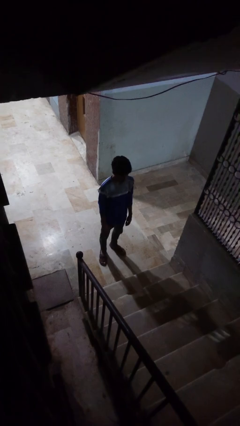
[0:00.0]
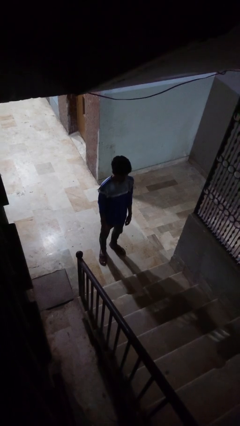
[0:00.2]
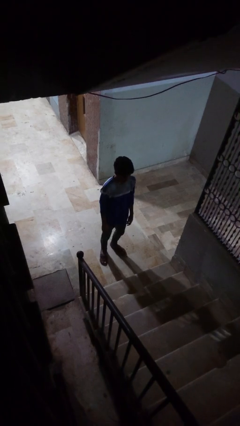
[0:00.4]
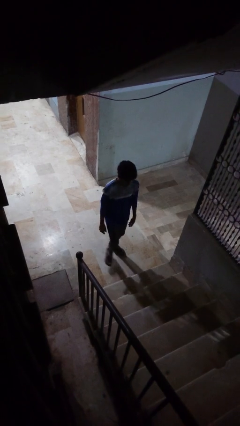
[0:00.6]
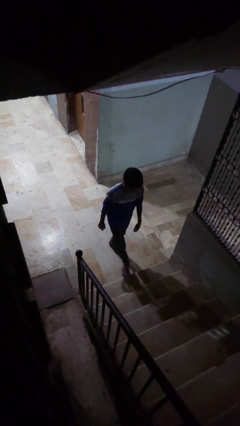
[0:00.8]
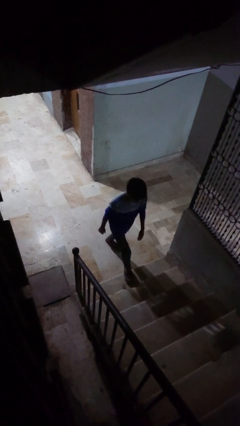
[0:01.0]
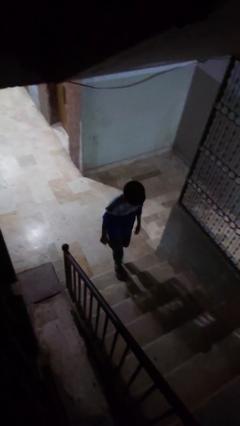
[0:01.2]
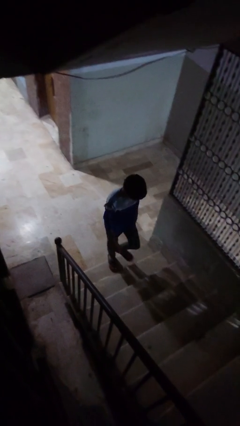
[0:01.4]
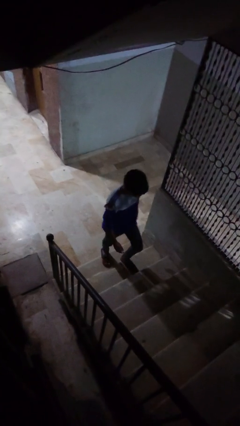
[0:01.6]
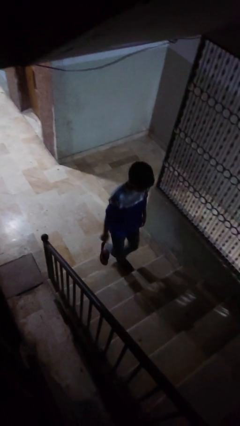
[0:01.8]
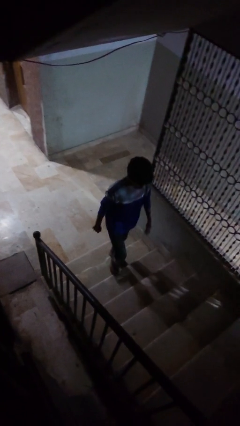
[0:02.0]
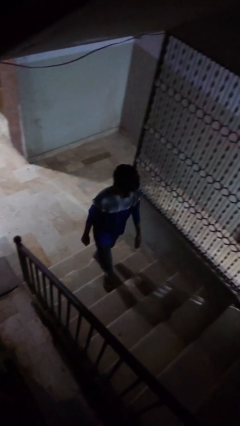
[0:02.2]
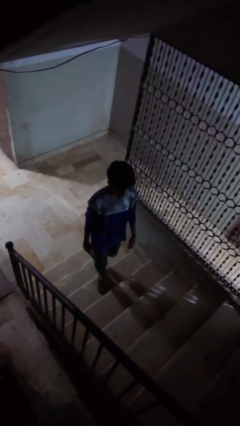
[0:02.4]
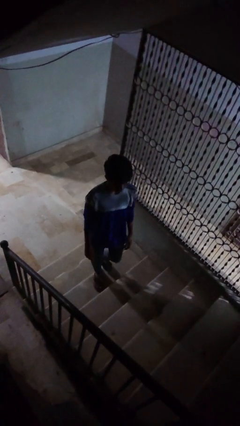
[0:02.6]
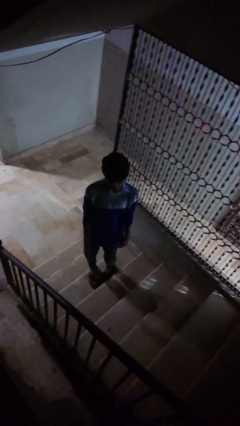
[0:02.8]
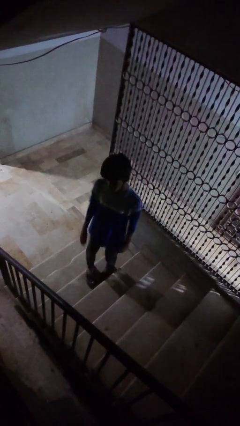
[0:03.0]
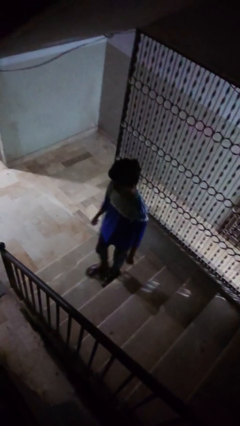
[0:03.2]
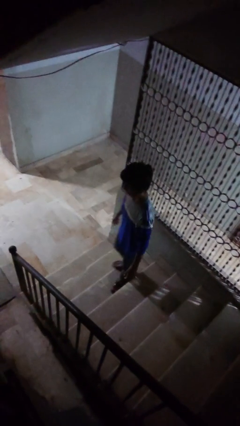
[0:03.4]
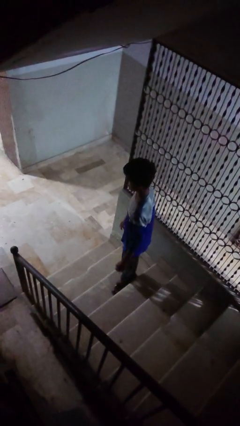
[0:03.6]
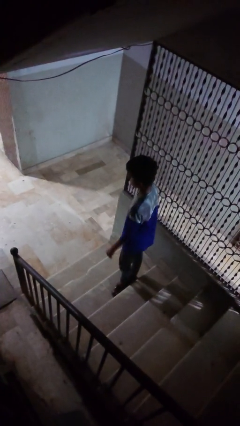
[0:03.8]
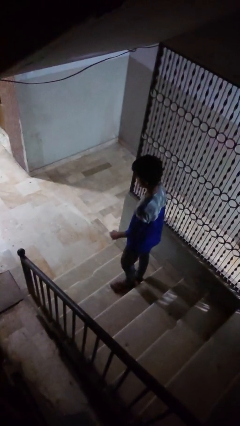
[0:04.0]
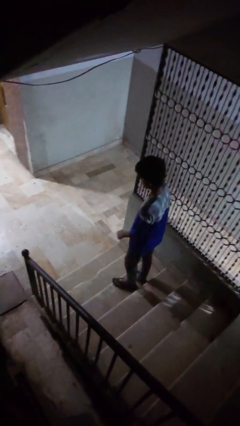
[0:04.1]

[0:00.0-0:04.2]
person climbs up stairs

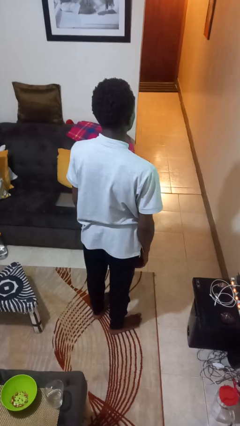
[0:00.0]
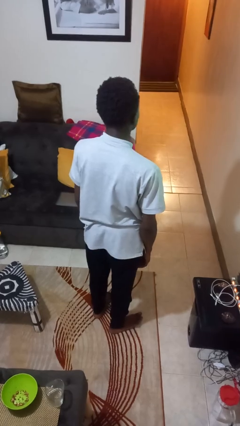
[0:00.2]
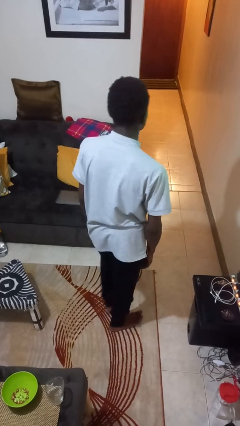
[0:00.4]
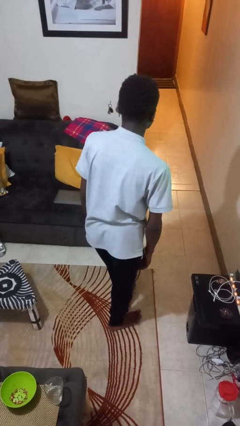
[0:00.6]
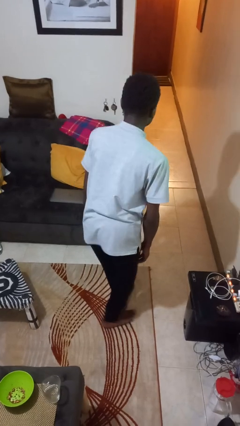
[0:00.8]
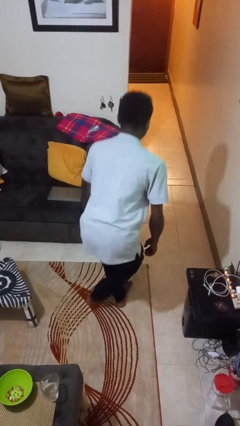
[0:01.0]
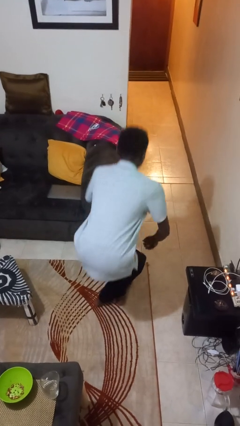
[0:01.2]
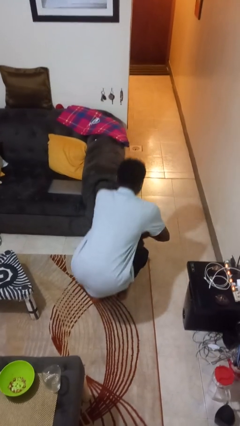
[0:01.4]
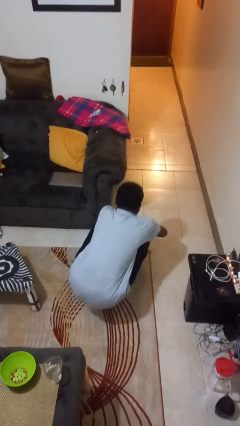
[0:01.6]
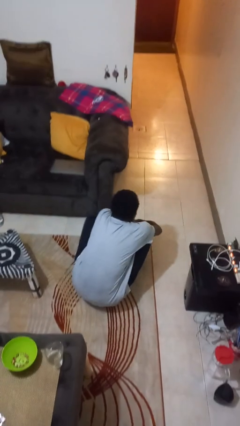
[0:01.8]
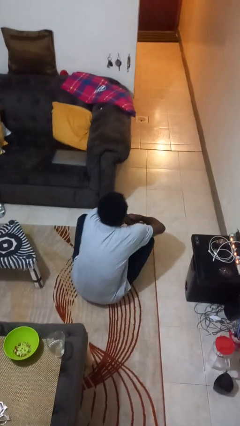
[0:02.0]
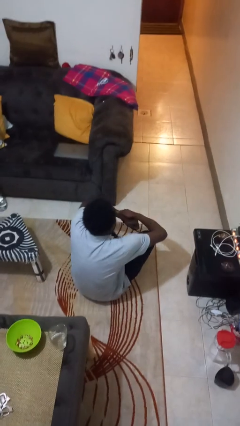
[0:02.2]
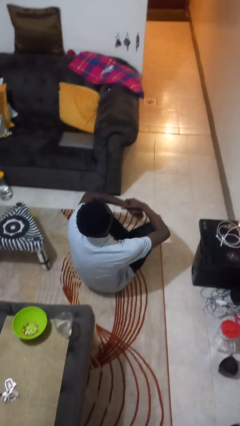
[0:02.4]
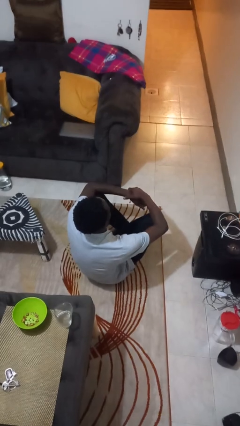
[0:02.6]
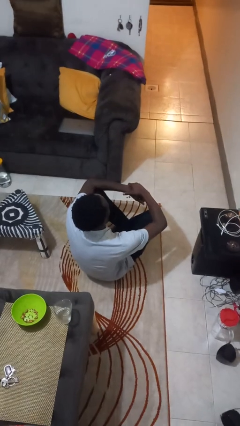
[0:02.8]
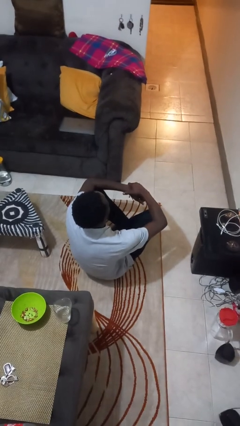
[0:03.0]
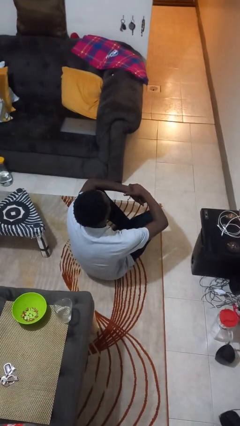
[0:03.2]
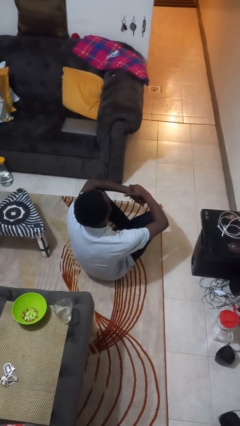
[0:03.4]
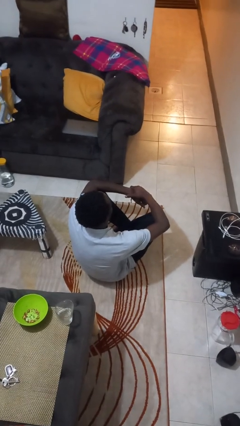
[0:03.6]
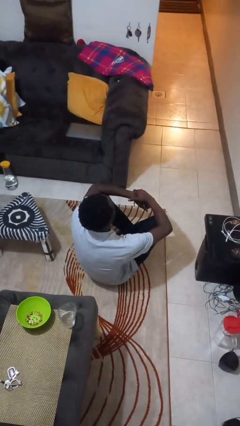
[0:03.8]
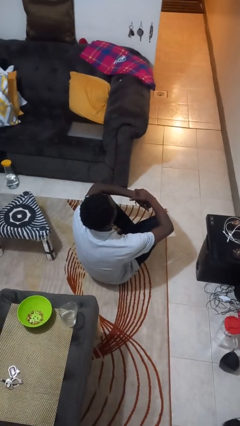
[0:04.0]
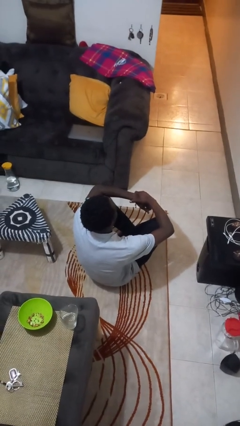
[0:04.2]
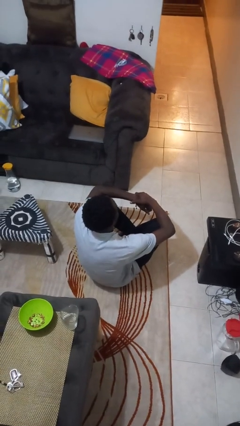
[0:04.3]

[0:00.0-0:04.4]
person sits crisscross

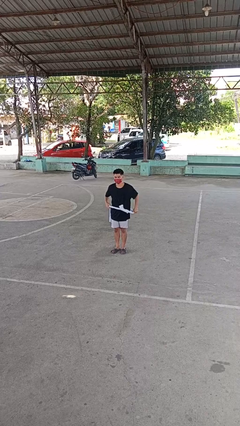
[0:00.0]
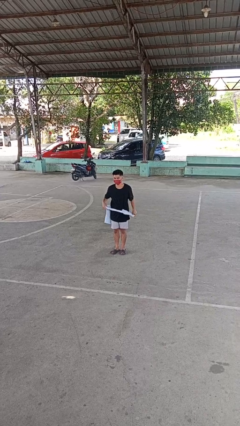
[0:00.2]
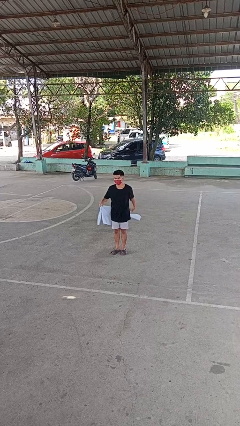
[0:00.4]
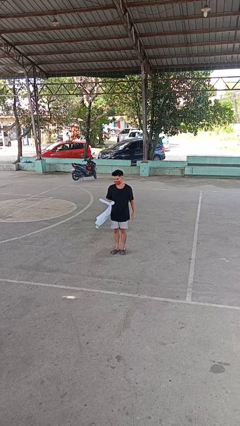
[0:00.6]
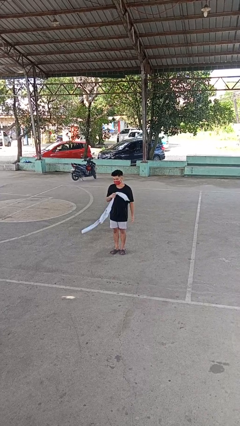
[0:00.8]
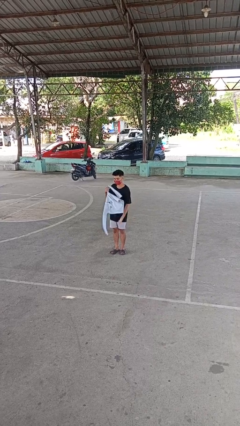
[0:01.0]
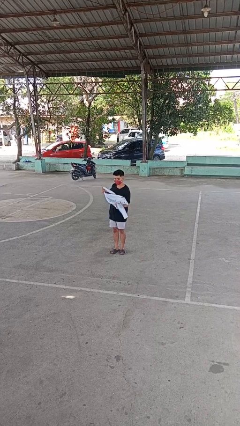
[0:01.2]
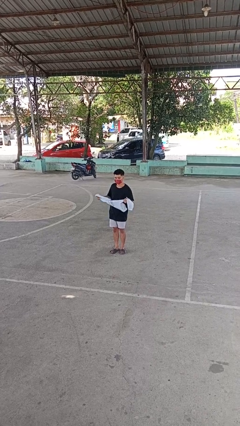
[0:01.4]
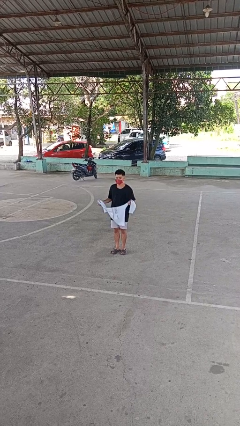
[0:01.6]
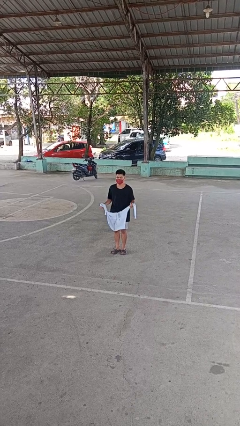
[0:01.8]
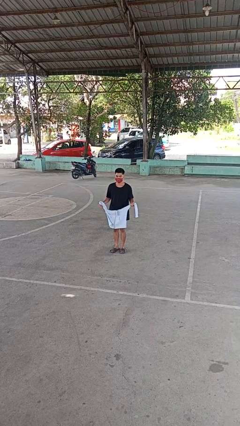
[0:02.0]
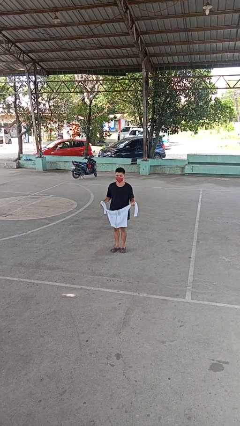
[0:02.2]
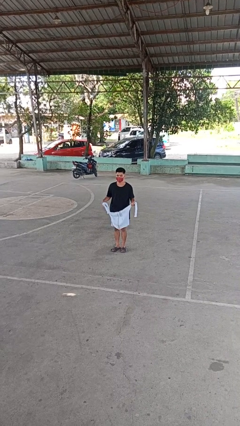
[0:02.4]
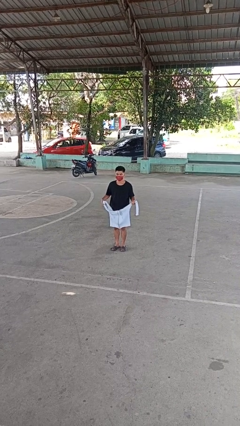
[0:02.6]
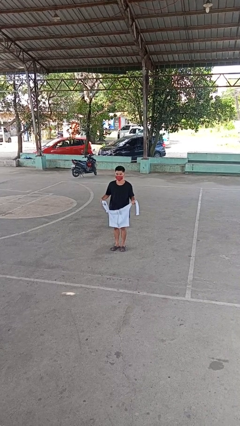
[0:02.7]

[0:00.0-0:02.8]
person unties jacket around waist

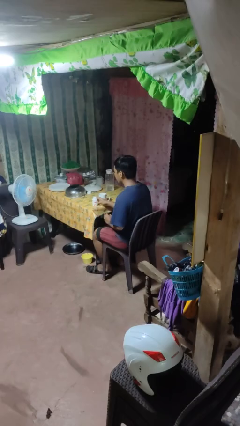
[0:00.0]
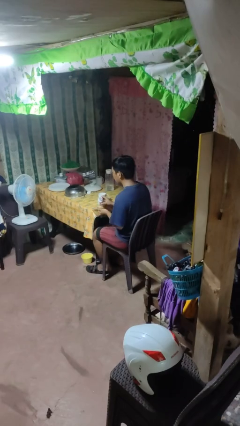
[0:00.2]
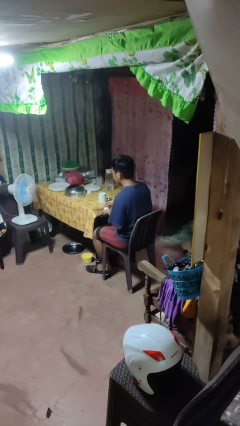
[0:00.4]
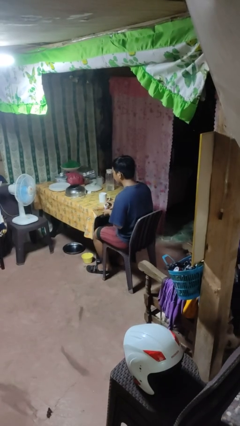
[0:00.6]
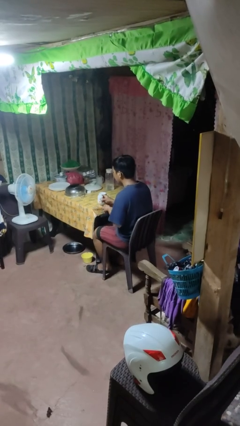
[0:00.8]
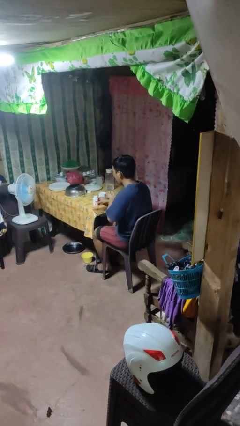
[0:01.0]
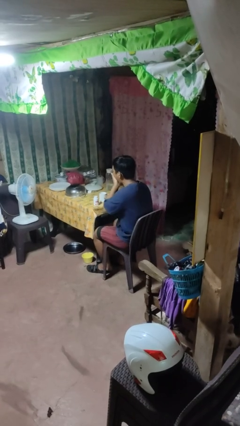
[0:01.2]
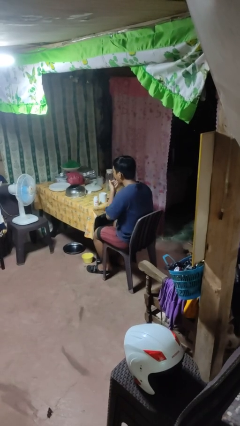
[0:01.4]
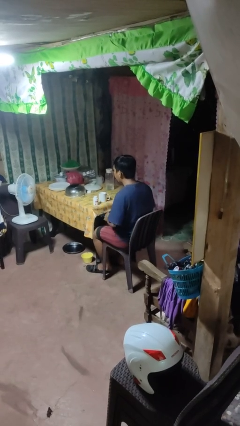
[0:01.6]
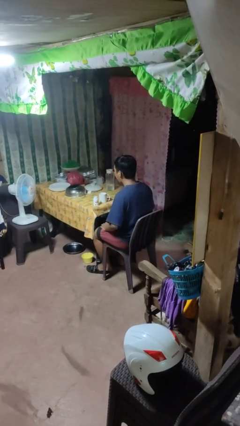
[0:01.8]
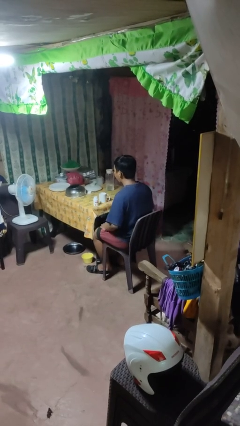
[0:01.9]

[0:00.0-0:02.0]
person takes medicine pills

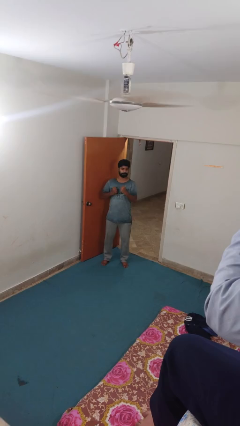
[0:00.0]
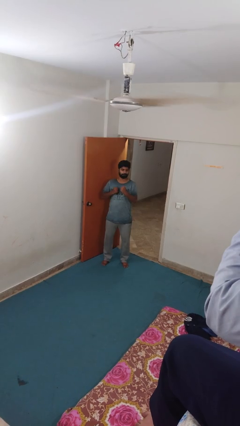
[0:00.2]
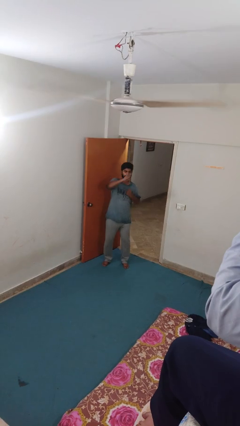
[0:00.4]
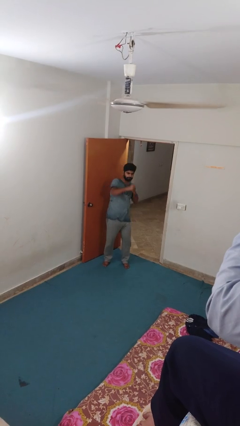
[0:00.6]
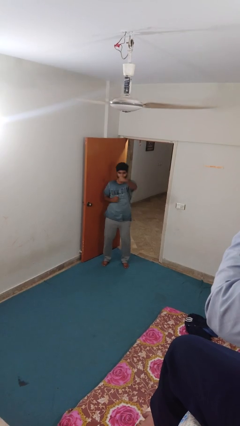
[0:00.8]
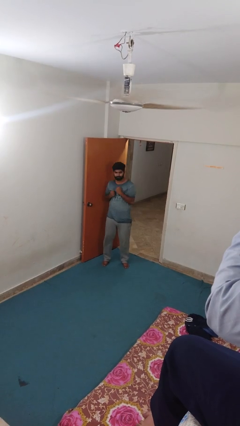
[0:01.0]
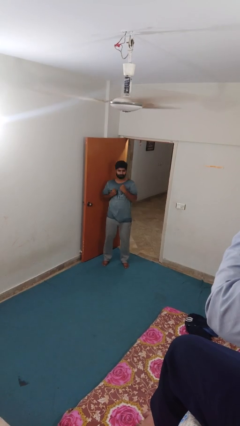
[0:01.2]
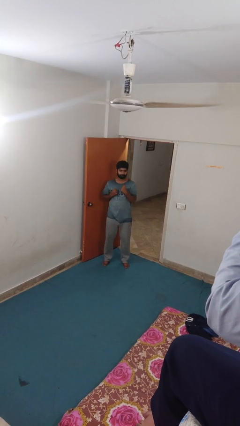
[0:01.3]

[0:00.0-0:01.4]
person punches

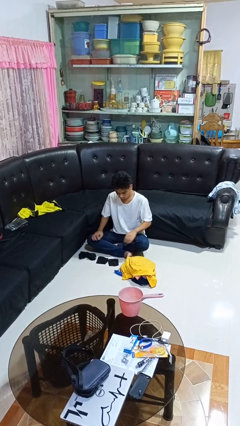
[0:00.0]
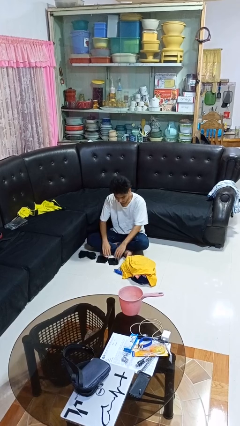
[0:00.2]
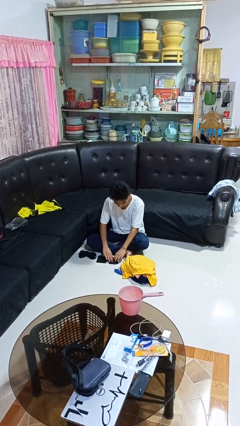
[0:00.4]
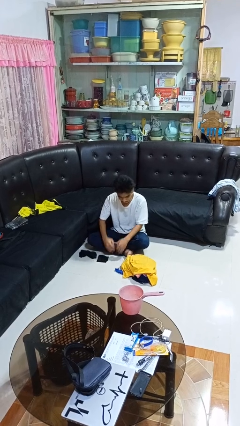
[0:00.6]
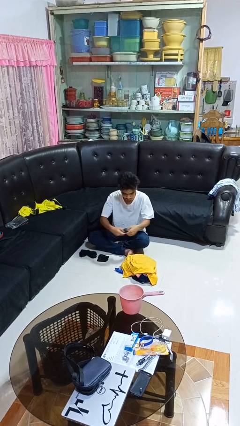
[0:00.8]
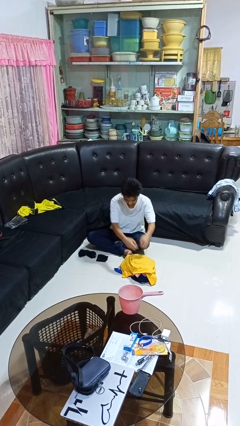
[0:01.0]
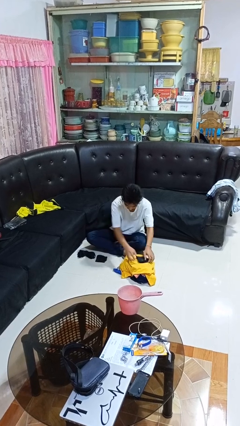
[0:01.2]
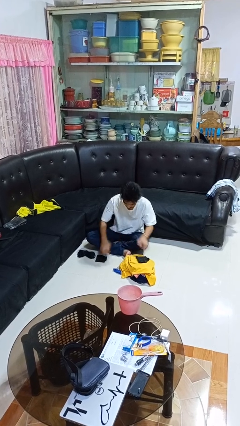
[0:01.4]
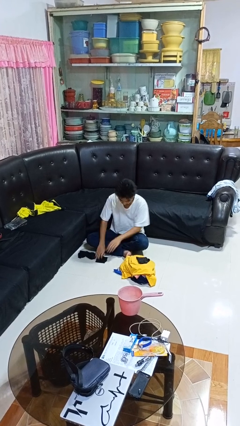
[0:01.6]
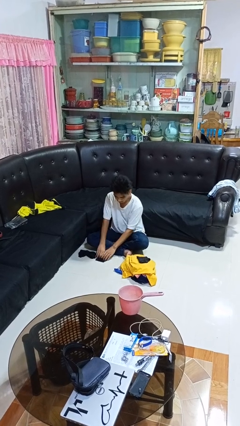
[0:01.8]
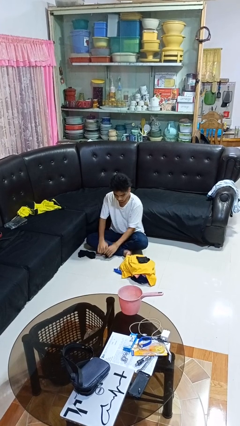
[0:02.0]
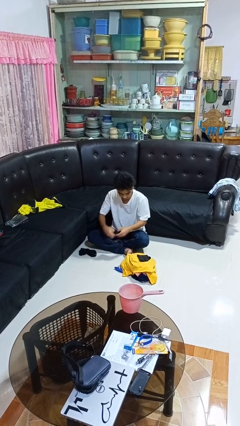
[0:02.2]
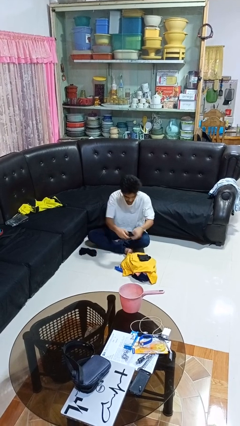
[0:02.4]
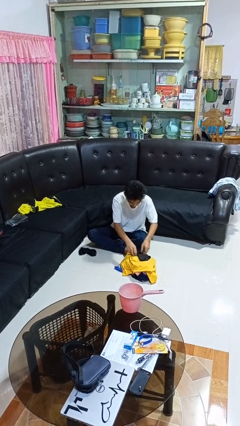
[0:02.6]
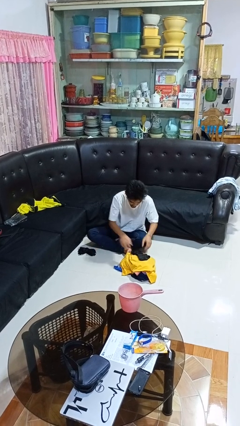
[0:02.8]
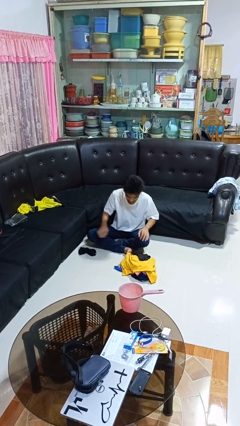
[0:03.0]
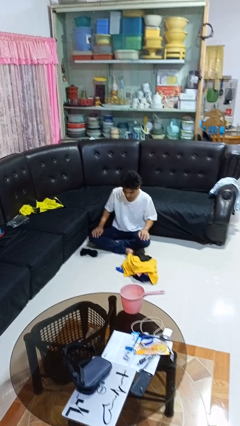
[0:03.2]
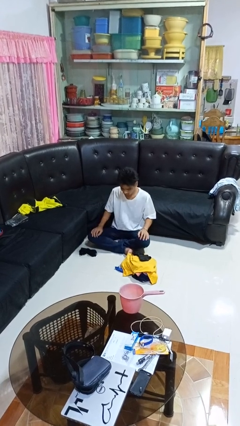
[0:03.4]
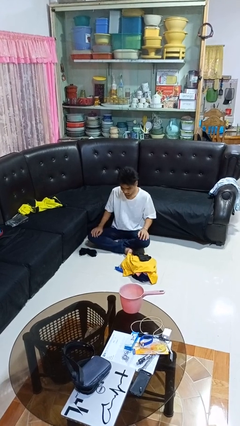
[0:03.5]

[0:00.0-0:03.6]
person folds socks
